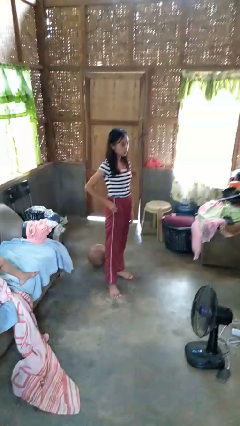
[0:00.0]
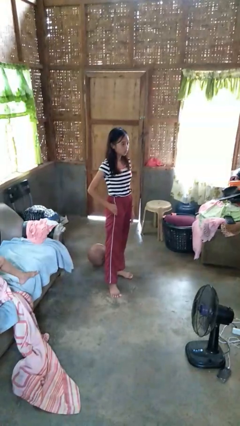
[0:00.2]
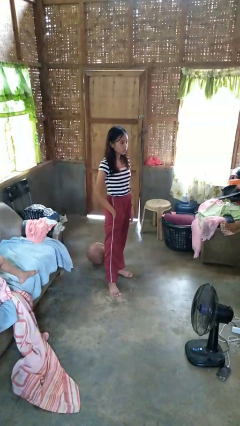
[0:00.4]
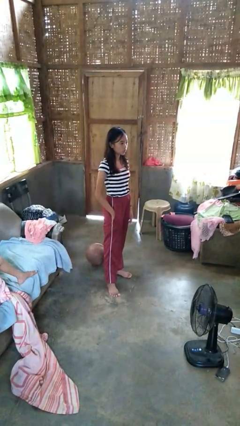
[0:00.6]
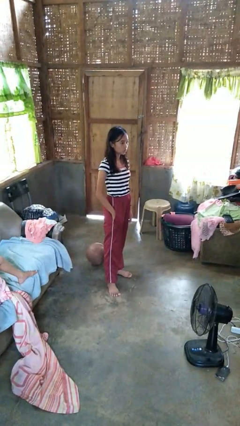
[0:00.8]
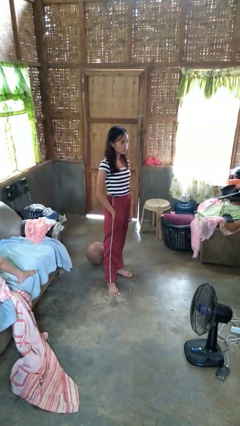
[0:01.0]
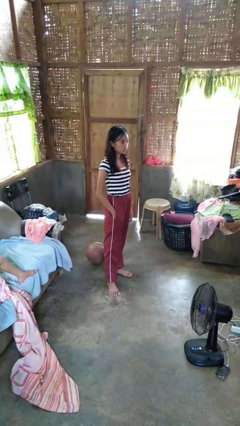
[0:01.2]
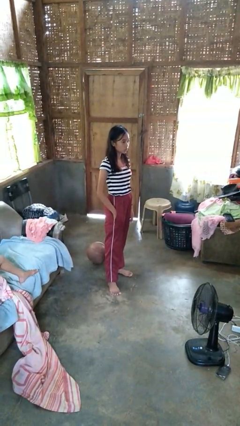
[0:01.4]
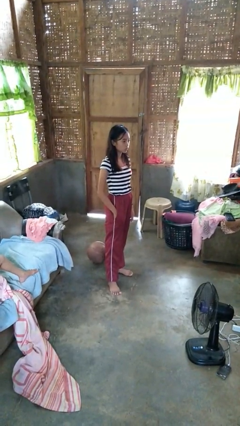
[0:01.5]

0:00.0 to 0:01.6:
person puts hands in back pockets

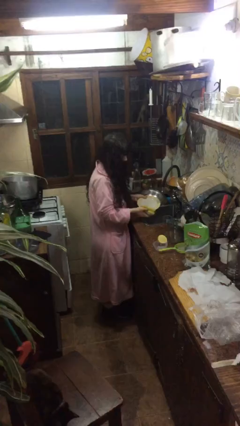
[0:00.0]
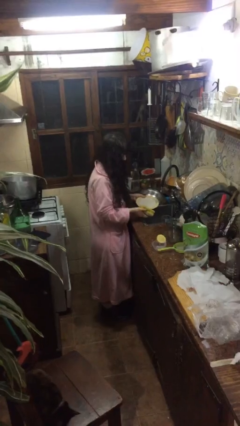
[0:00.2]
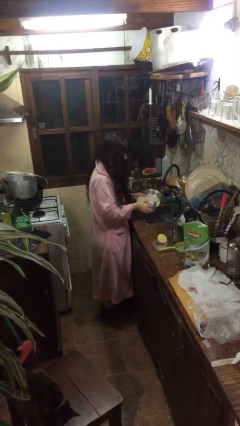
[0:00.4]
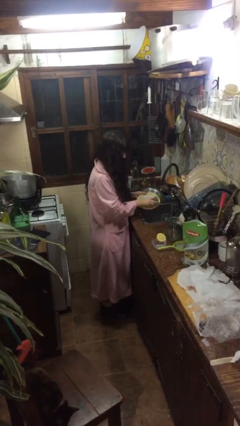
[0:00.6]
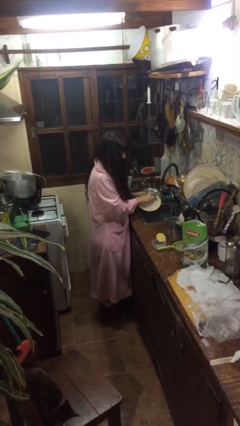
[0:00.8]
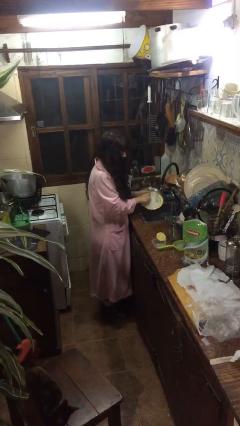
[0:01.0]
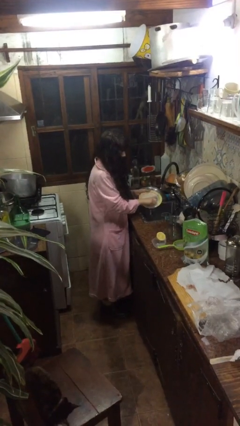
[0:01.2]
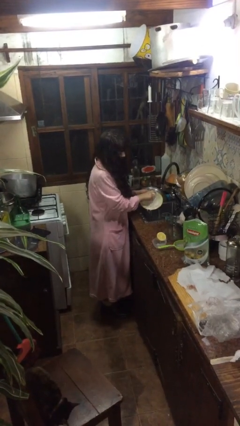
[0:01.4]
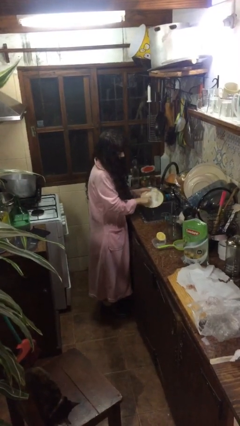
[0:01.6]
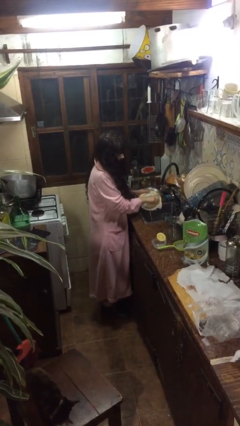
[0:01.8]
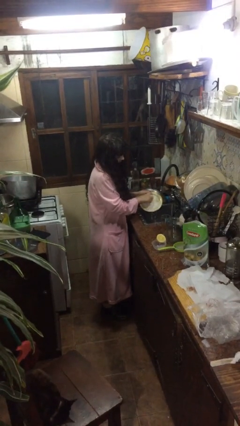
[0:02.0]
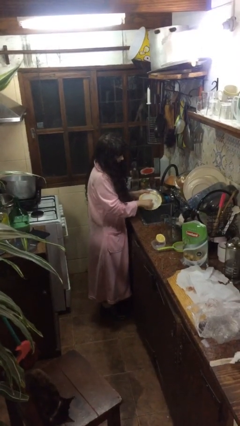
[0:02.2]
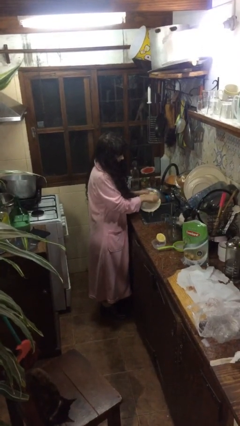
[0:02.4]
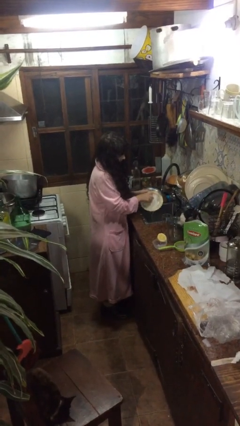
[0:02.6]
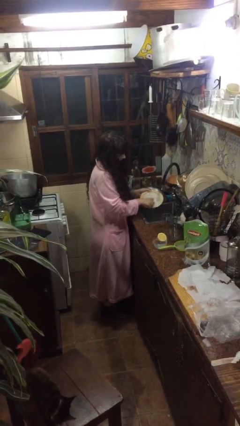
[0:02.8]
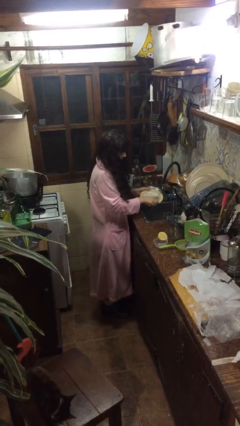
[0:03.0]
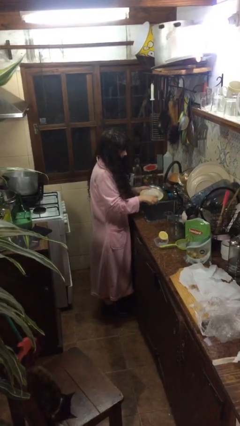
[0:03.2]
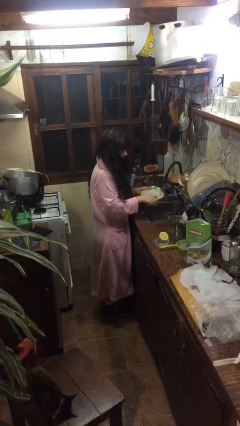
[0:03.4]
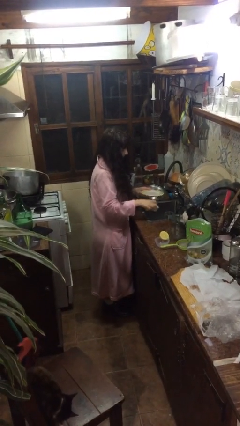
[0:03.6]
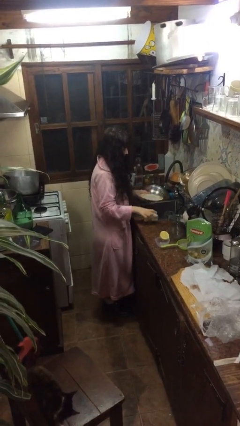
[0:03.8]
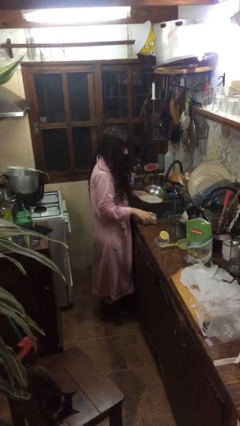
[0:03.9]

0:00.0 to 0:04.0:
person washes dish

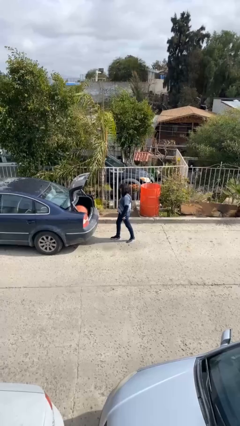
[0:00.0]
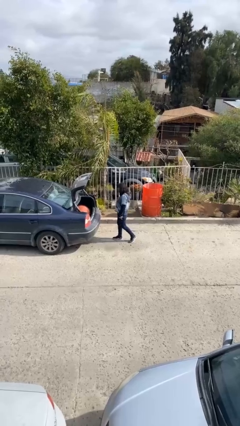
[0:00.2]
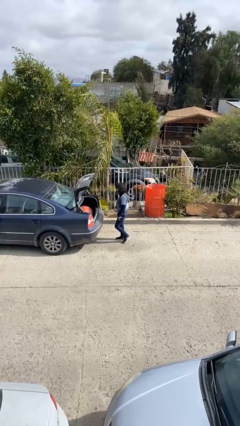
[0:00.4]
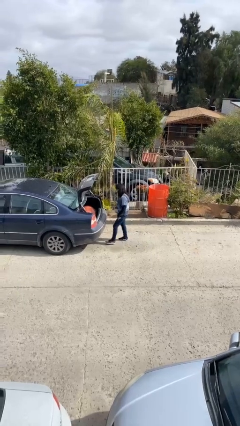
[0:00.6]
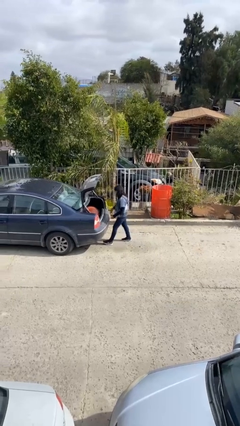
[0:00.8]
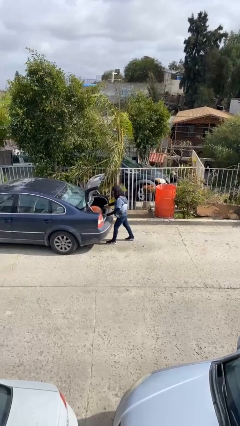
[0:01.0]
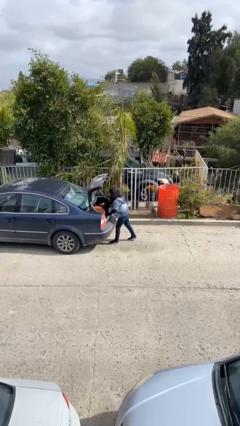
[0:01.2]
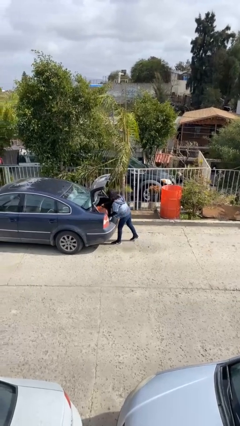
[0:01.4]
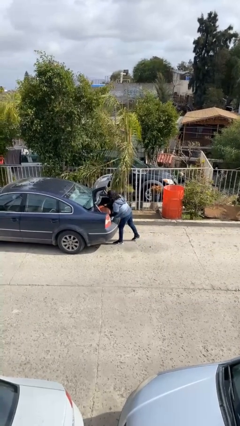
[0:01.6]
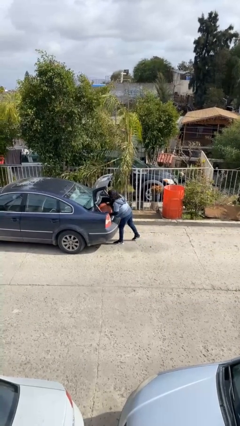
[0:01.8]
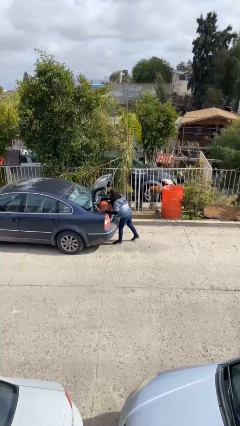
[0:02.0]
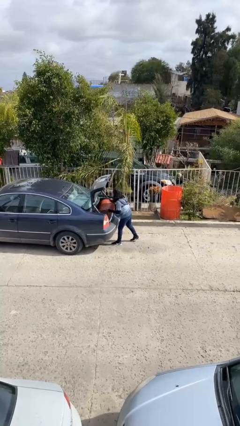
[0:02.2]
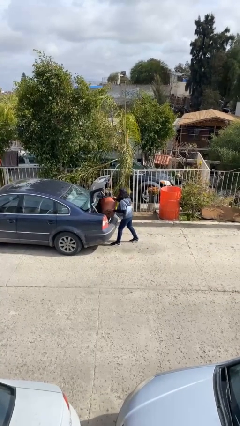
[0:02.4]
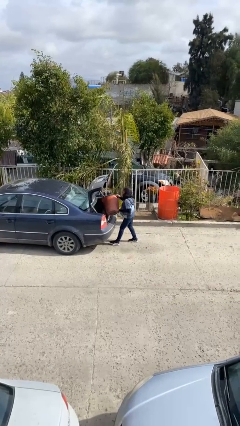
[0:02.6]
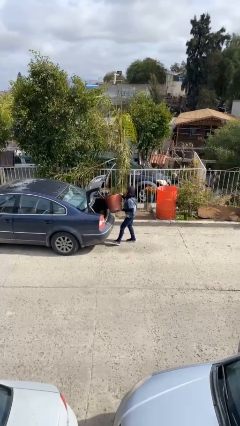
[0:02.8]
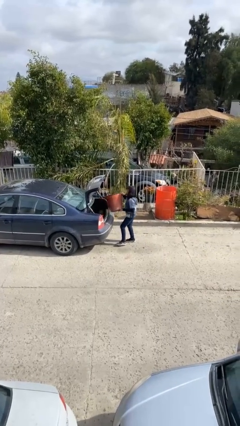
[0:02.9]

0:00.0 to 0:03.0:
person unloads car

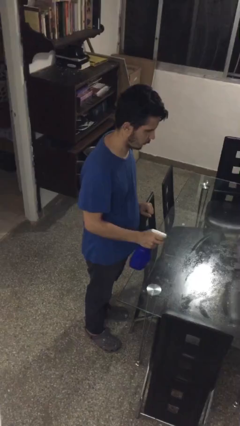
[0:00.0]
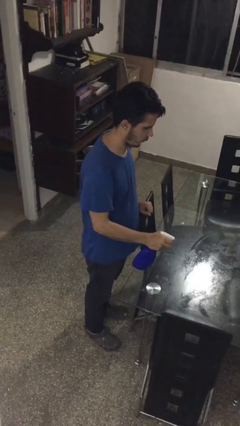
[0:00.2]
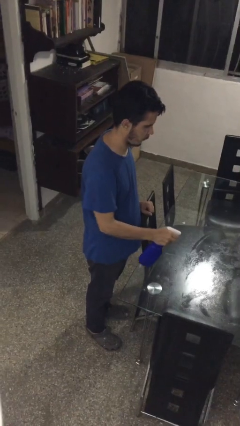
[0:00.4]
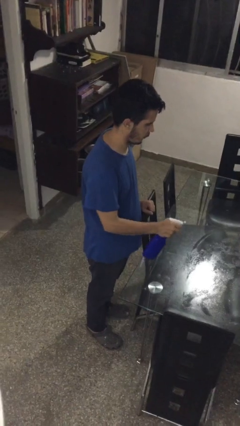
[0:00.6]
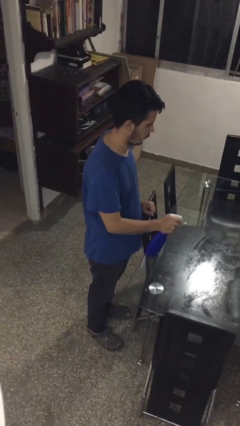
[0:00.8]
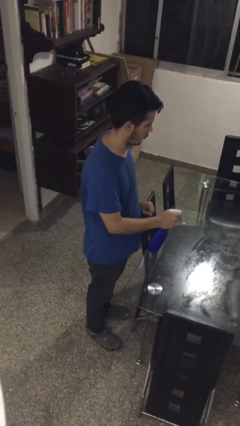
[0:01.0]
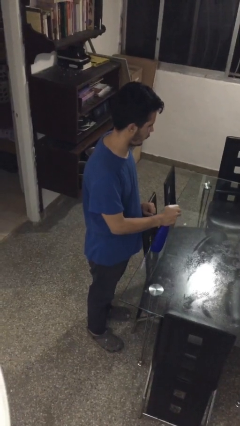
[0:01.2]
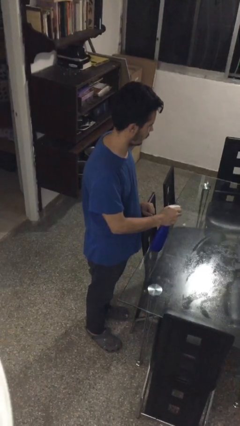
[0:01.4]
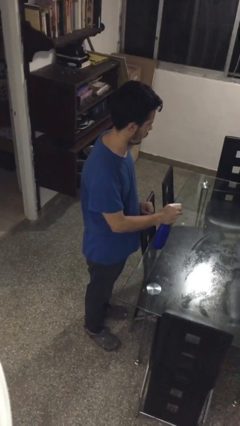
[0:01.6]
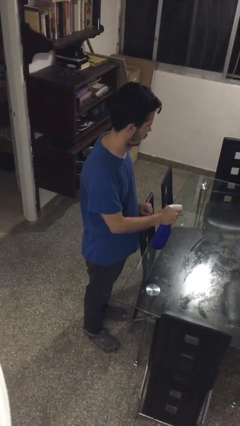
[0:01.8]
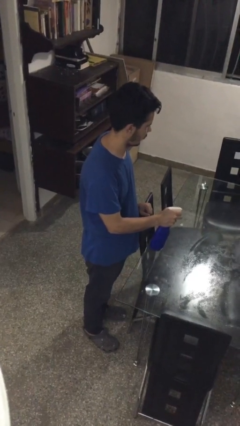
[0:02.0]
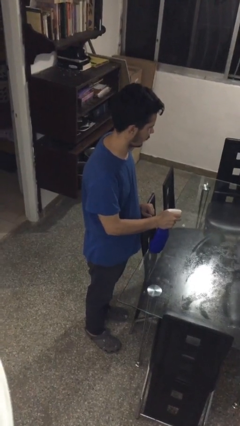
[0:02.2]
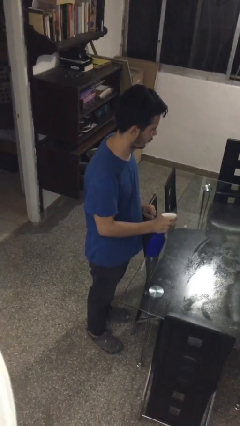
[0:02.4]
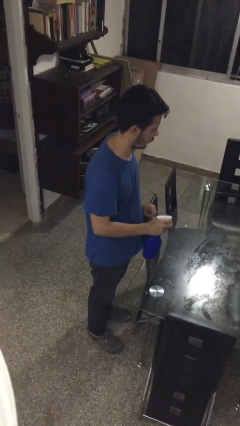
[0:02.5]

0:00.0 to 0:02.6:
person sprays from bottle

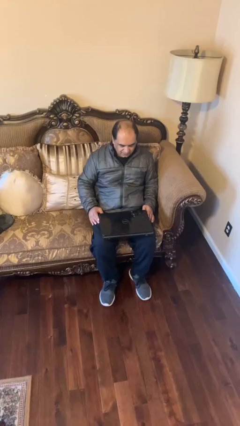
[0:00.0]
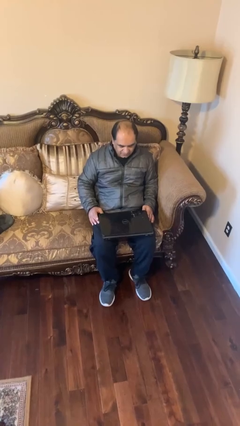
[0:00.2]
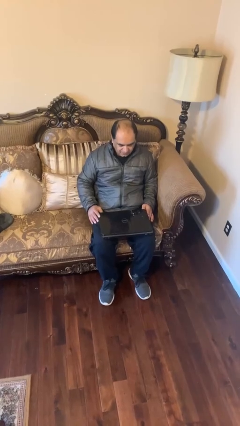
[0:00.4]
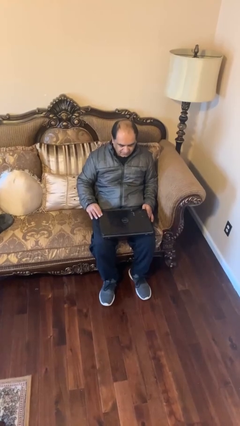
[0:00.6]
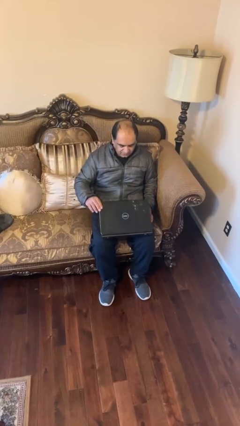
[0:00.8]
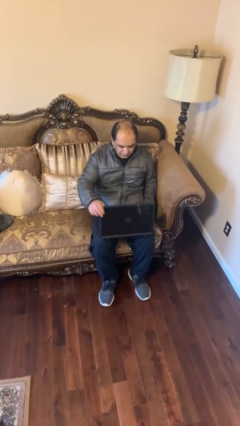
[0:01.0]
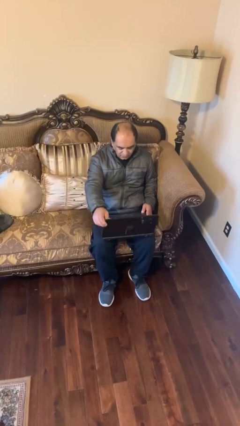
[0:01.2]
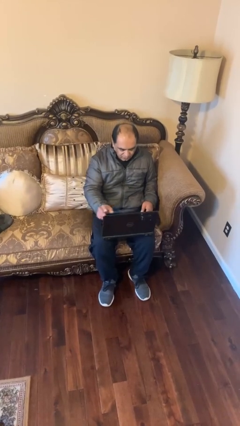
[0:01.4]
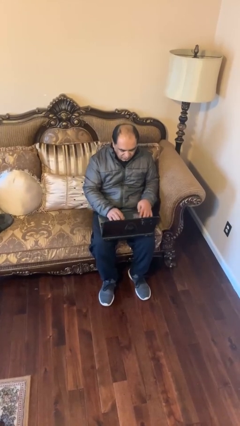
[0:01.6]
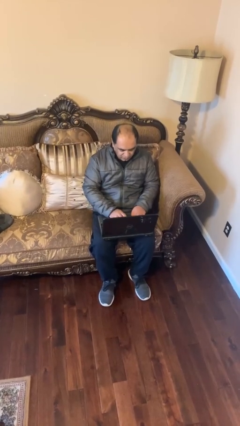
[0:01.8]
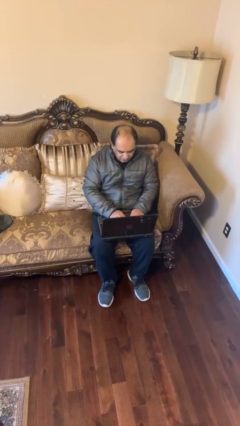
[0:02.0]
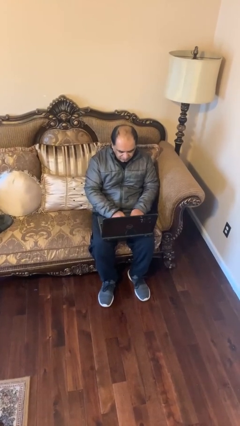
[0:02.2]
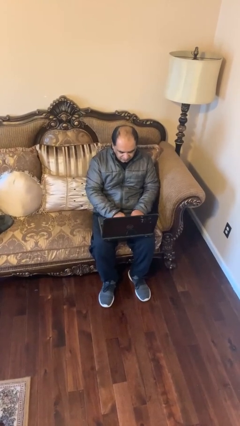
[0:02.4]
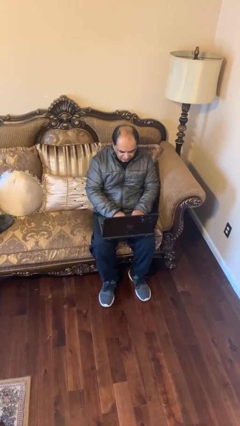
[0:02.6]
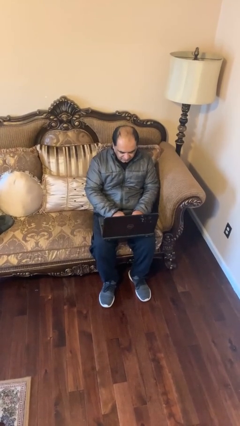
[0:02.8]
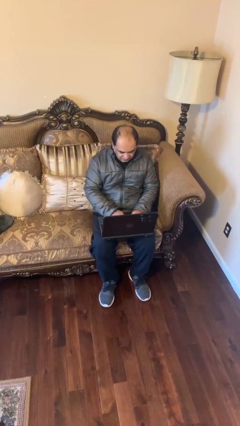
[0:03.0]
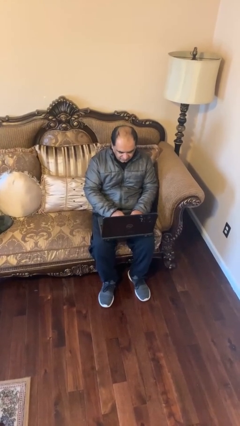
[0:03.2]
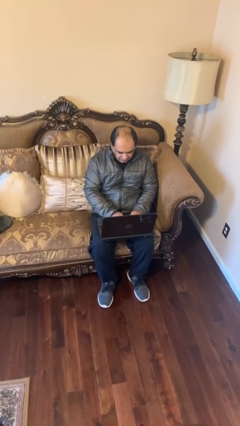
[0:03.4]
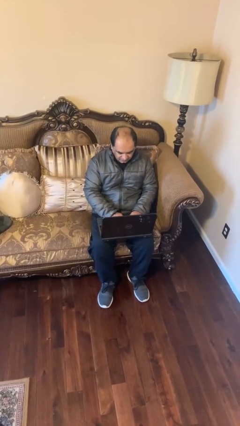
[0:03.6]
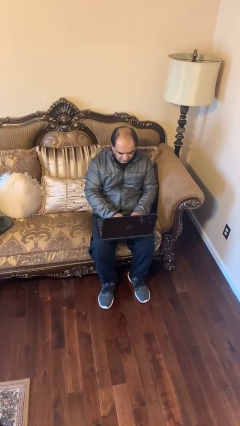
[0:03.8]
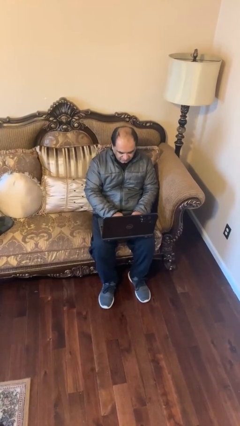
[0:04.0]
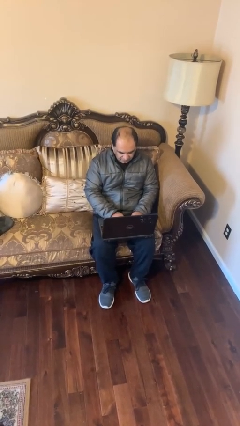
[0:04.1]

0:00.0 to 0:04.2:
person interacts with laptop

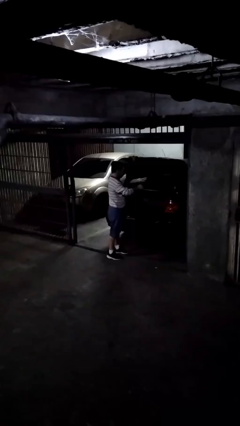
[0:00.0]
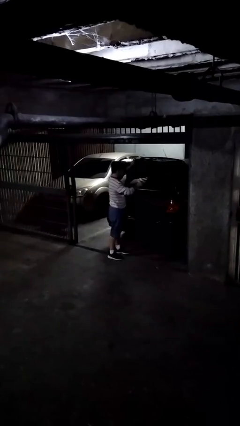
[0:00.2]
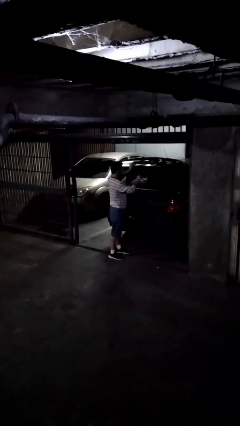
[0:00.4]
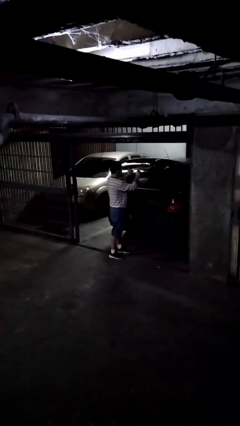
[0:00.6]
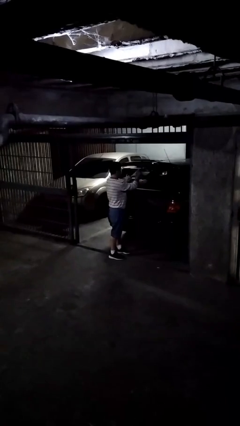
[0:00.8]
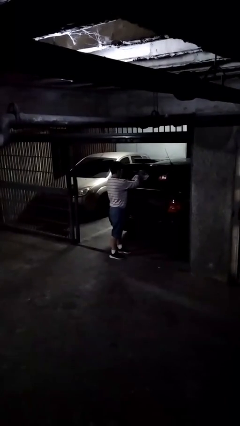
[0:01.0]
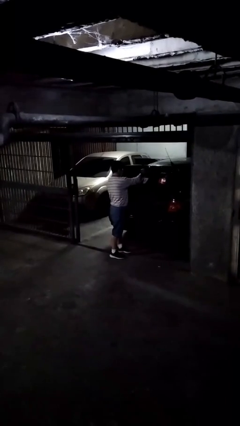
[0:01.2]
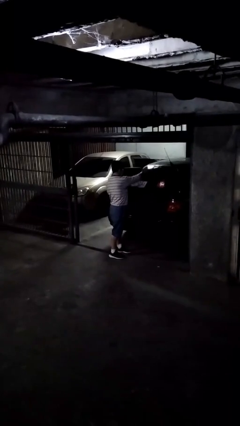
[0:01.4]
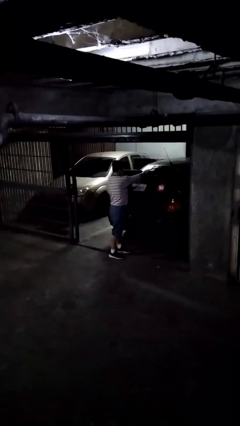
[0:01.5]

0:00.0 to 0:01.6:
person closes car trunk

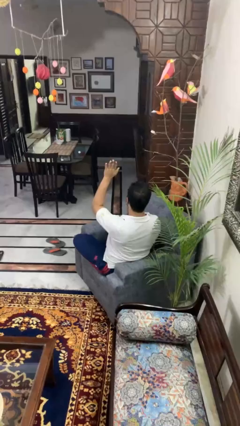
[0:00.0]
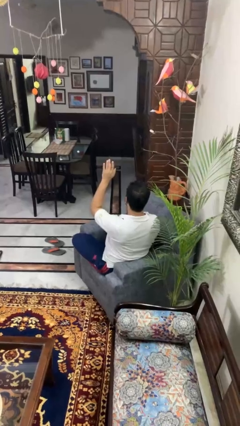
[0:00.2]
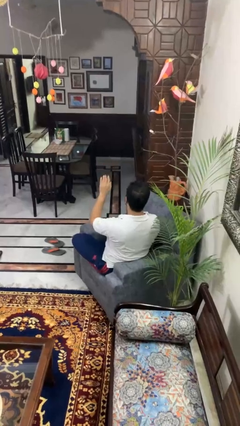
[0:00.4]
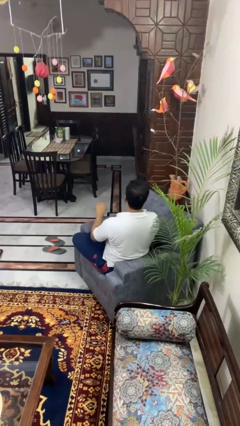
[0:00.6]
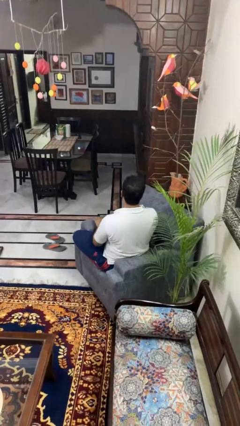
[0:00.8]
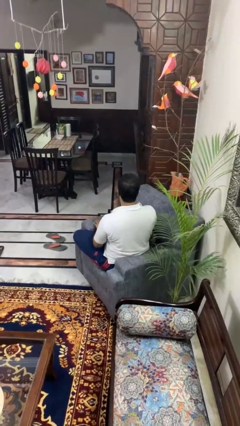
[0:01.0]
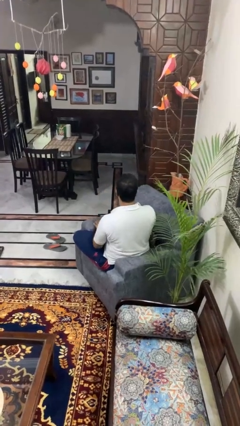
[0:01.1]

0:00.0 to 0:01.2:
person gestures lower hand
